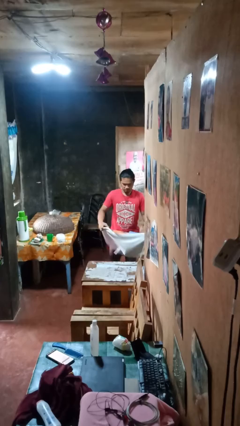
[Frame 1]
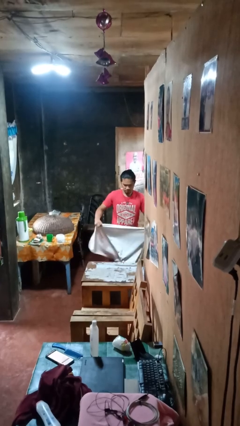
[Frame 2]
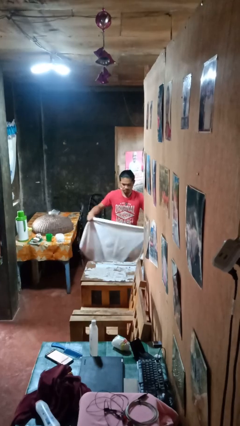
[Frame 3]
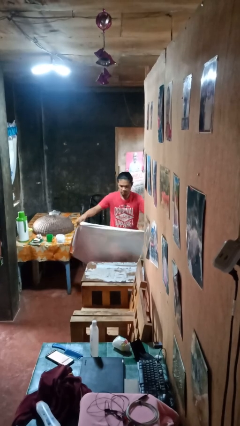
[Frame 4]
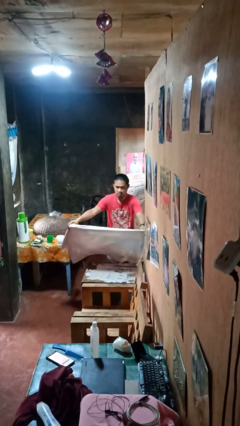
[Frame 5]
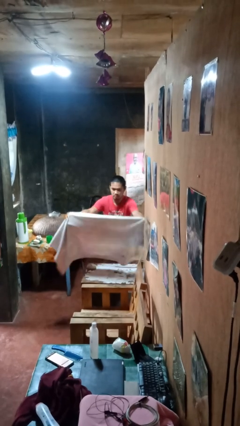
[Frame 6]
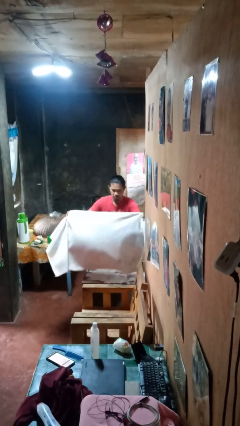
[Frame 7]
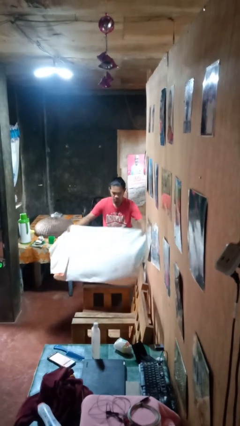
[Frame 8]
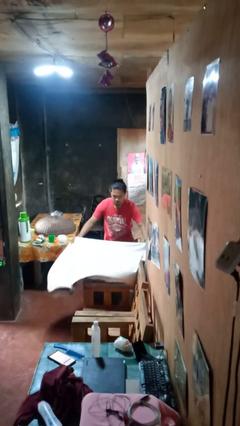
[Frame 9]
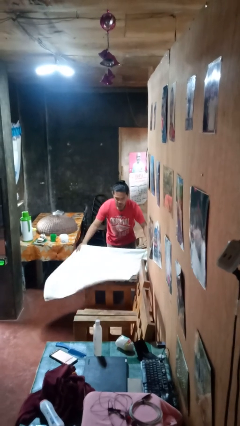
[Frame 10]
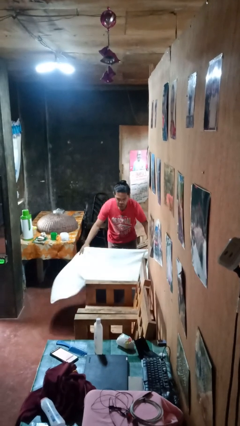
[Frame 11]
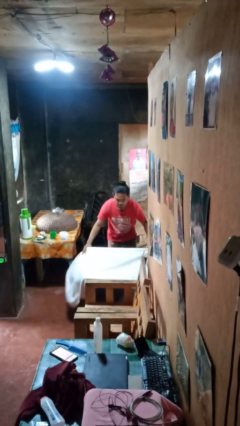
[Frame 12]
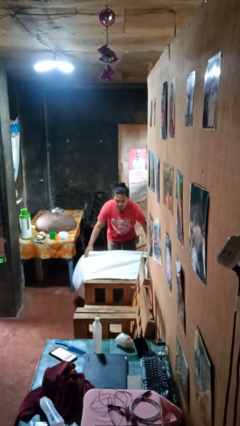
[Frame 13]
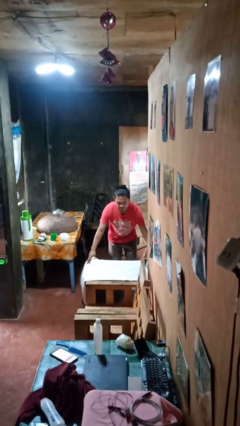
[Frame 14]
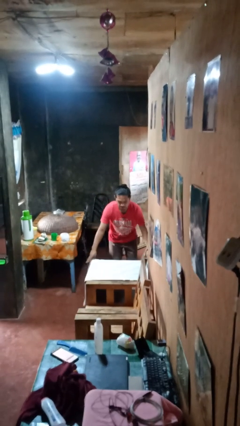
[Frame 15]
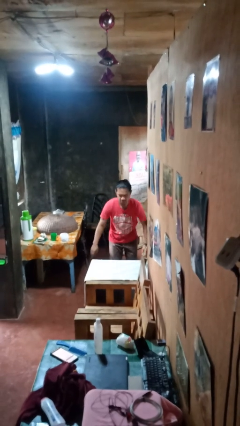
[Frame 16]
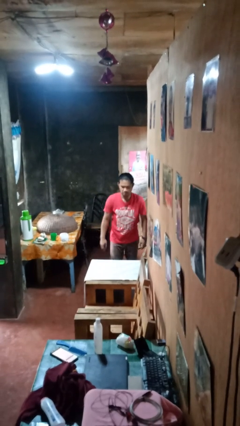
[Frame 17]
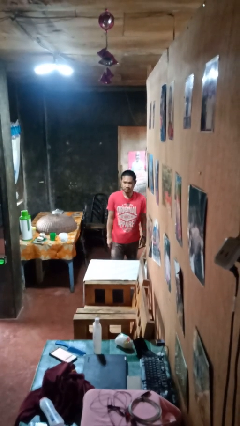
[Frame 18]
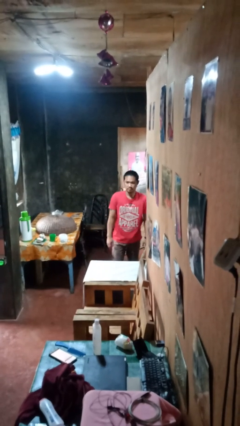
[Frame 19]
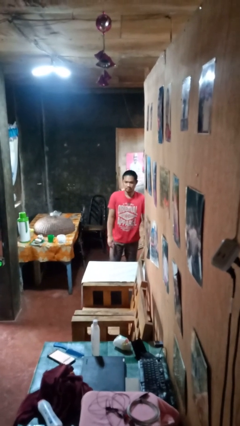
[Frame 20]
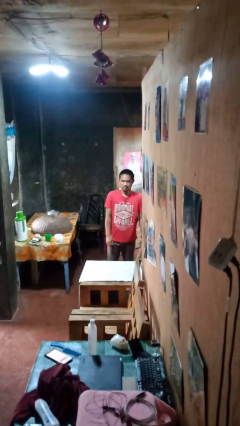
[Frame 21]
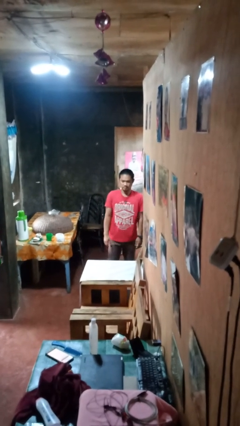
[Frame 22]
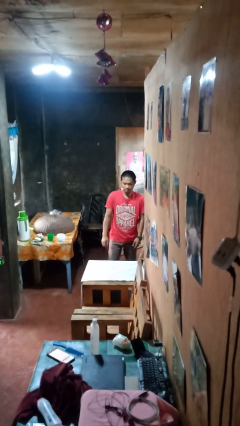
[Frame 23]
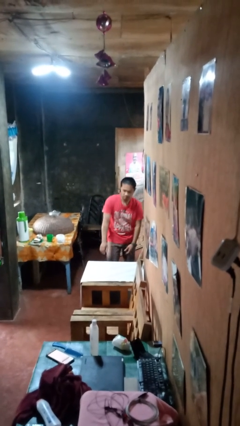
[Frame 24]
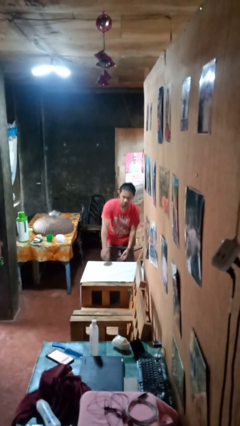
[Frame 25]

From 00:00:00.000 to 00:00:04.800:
person spreads tablecloth

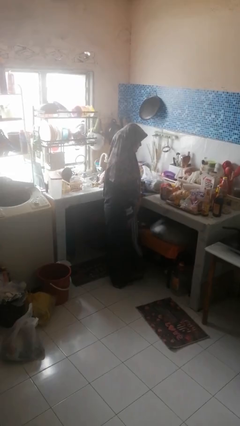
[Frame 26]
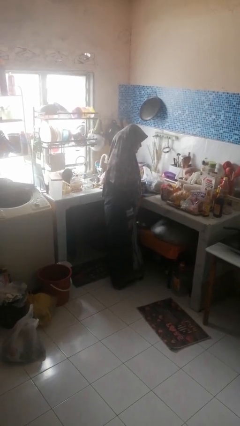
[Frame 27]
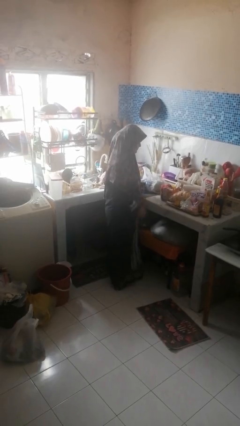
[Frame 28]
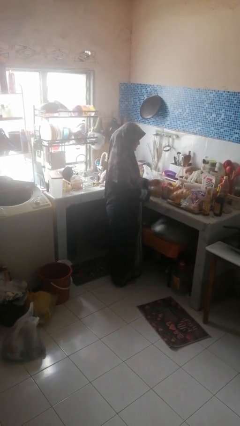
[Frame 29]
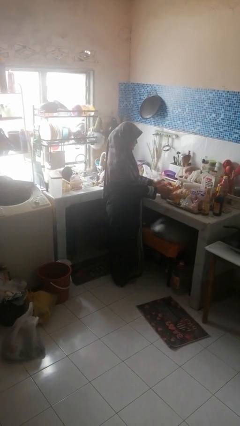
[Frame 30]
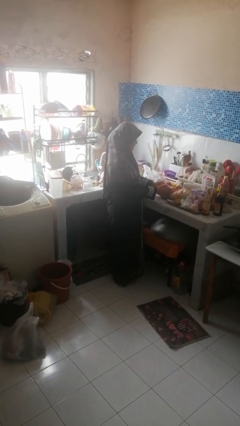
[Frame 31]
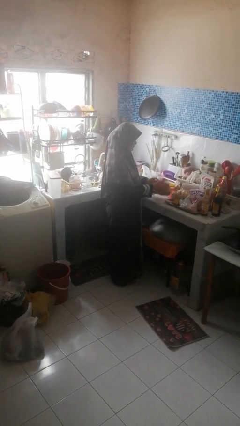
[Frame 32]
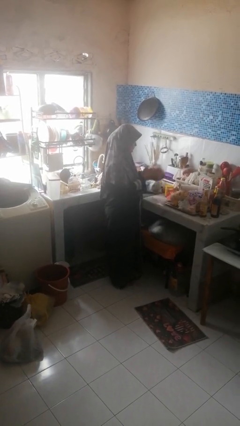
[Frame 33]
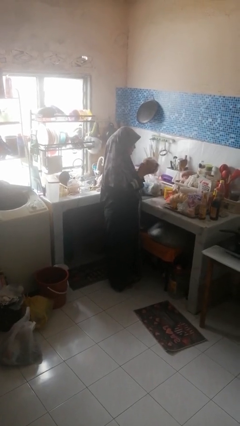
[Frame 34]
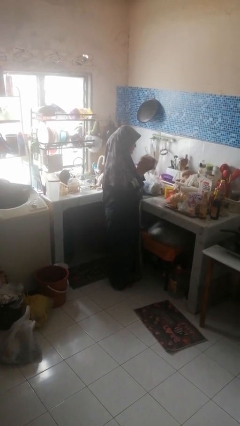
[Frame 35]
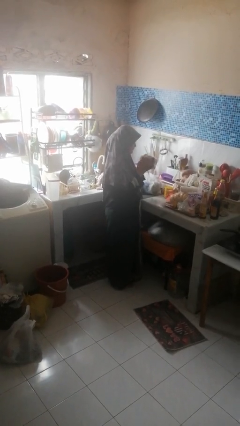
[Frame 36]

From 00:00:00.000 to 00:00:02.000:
person picks up object from countertop

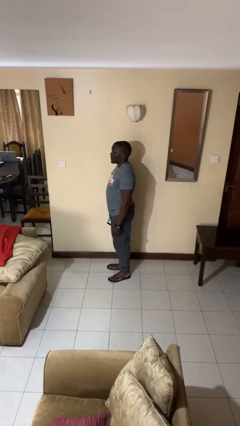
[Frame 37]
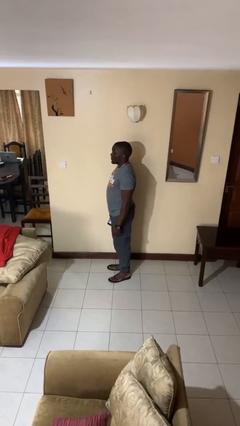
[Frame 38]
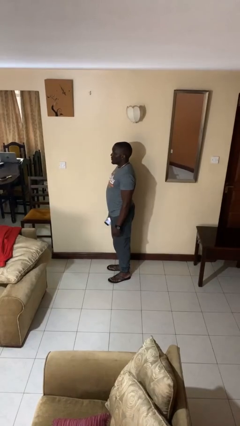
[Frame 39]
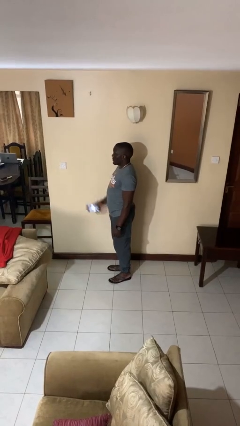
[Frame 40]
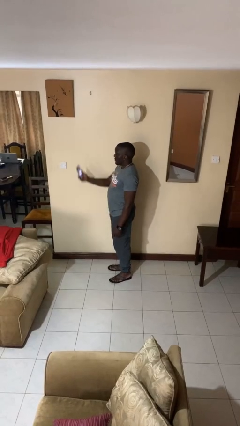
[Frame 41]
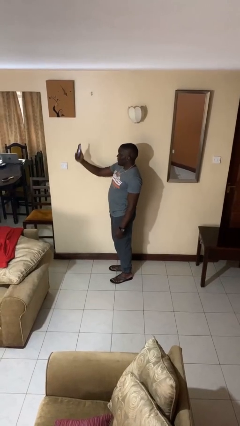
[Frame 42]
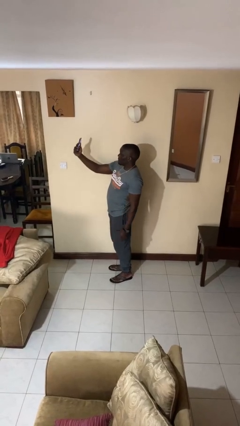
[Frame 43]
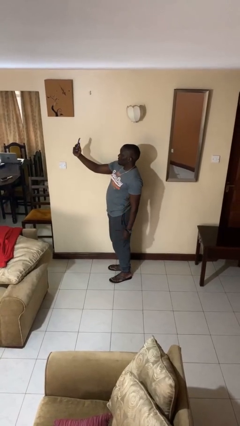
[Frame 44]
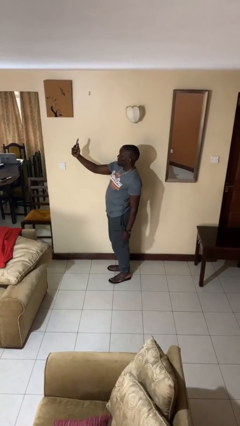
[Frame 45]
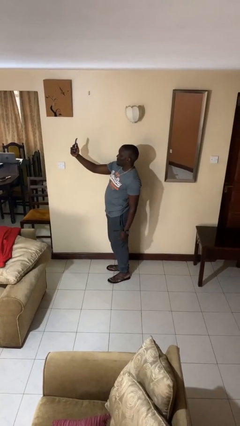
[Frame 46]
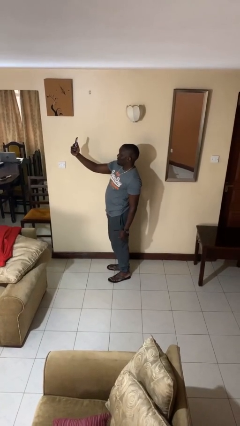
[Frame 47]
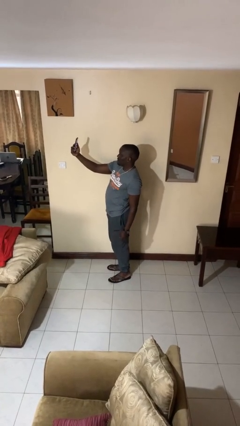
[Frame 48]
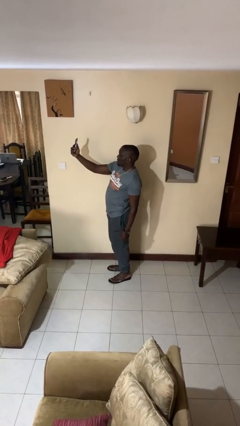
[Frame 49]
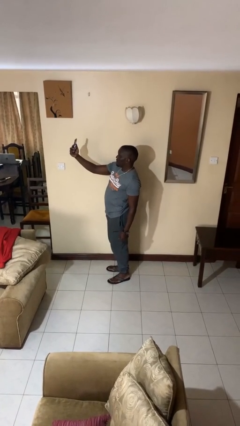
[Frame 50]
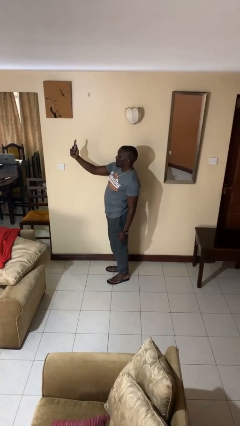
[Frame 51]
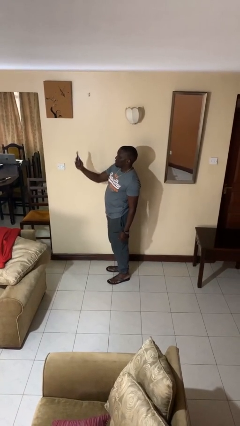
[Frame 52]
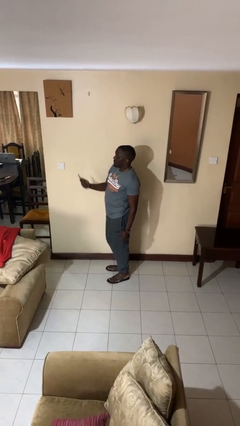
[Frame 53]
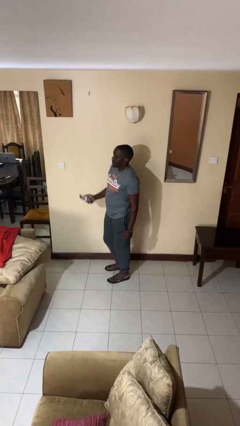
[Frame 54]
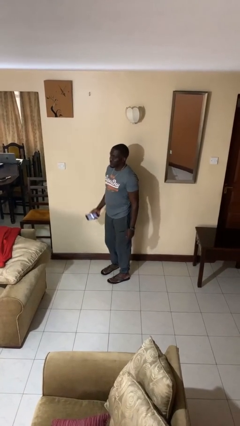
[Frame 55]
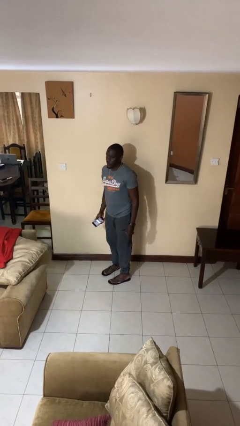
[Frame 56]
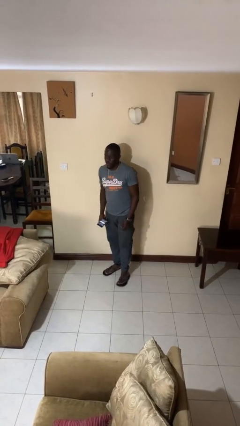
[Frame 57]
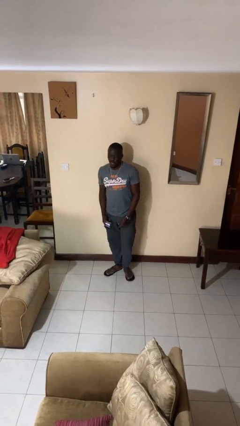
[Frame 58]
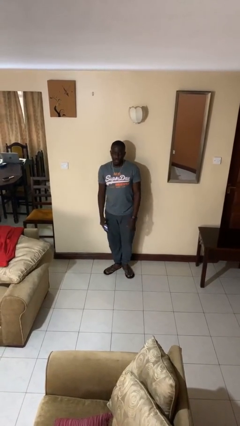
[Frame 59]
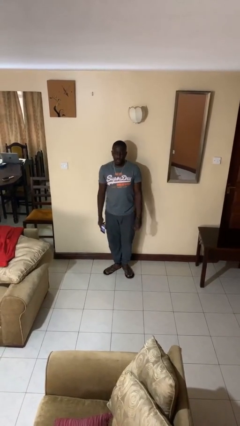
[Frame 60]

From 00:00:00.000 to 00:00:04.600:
person takes selfie

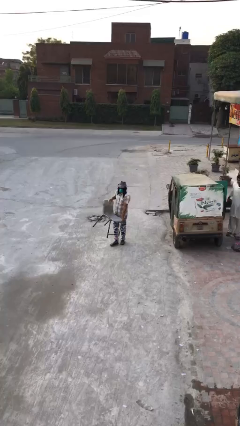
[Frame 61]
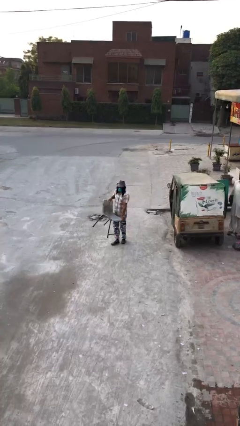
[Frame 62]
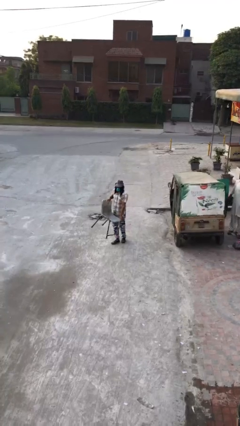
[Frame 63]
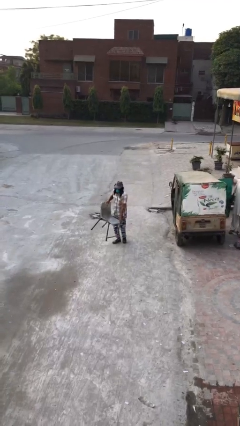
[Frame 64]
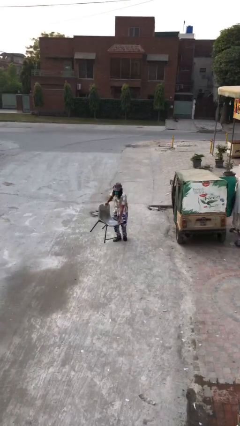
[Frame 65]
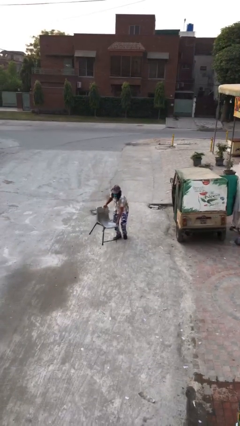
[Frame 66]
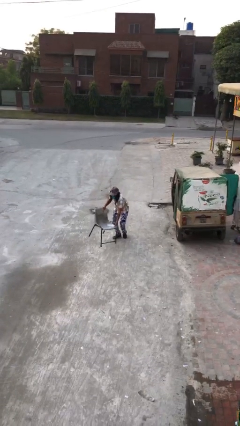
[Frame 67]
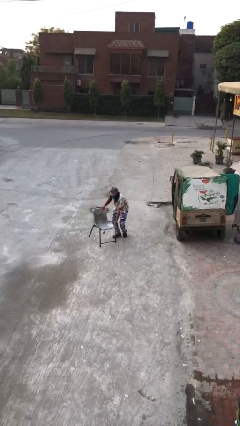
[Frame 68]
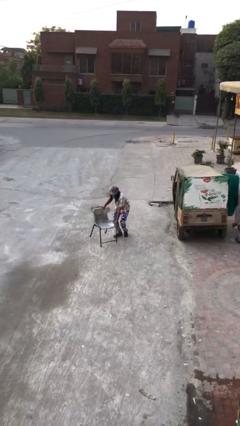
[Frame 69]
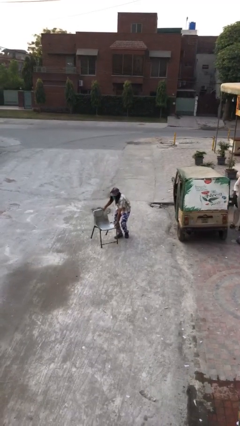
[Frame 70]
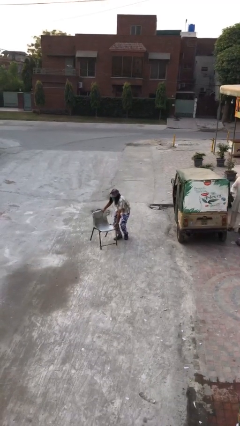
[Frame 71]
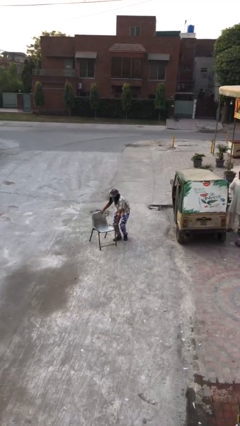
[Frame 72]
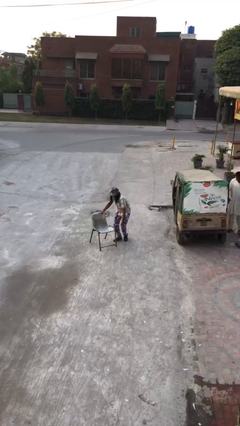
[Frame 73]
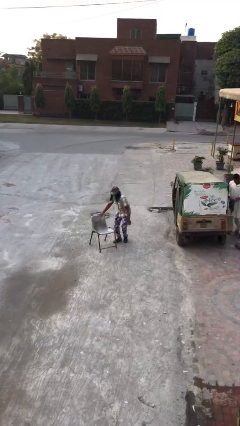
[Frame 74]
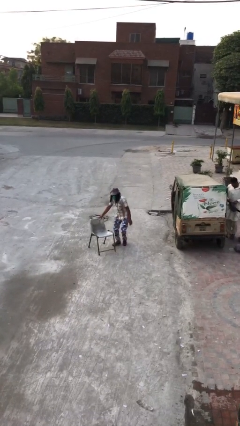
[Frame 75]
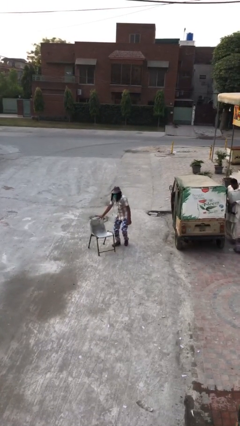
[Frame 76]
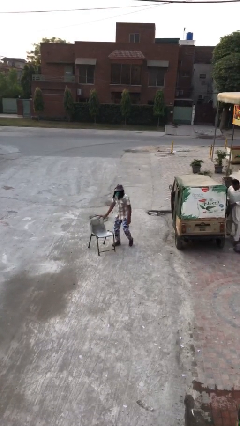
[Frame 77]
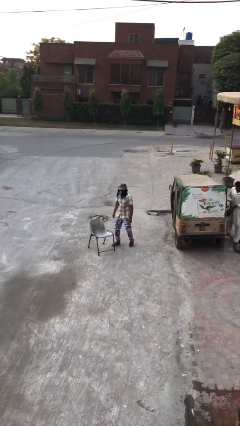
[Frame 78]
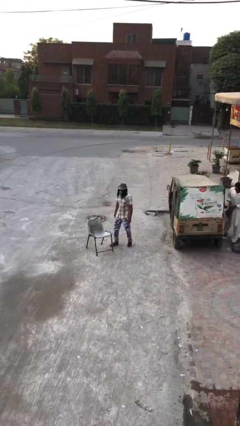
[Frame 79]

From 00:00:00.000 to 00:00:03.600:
person puts down object on floor

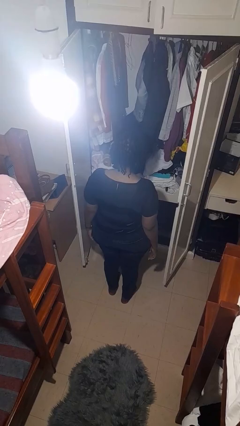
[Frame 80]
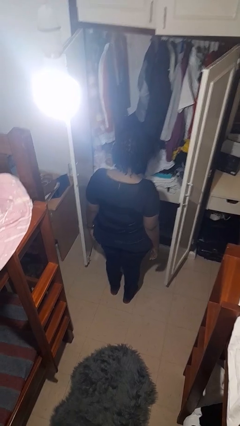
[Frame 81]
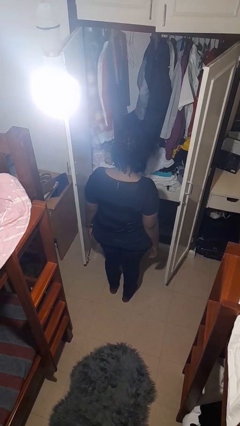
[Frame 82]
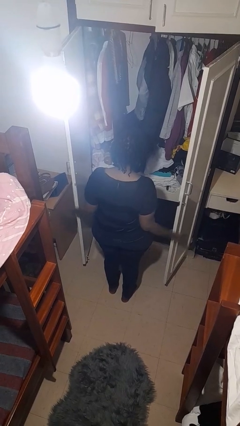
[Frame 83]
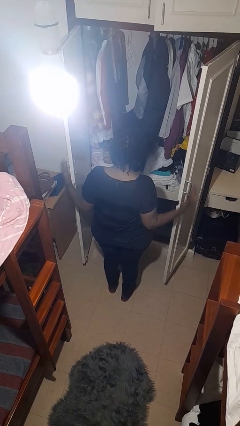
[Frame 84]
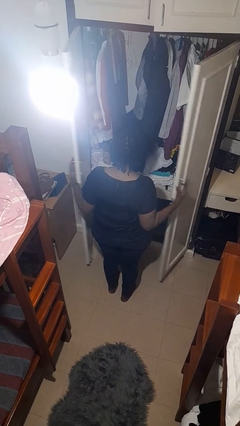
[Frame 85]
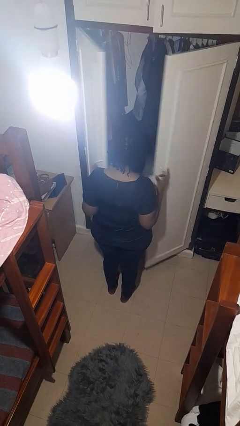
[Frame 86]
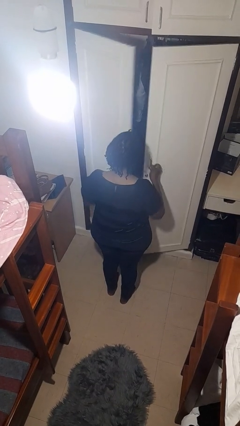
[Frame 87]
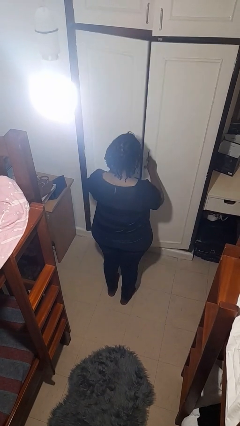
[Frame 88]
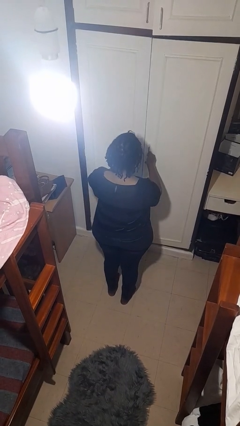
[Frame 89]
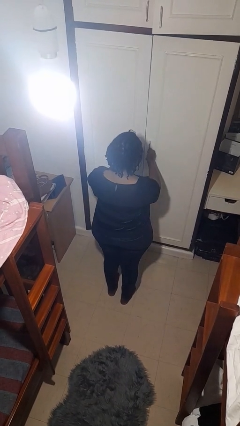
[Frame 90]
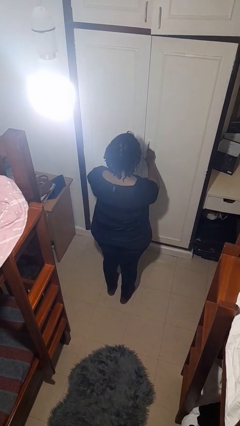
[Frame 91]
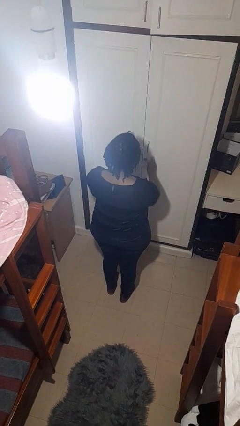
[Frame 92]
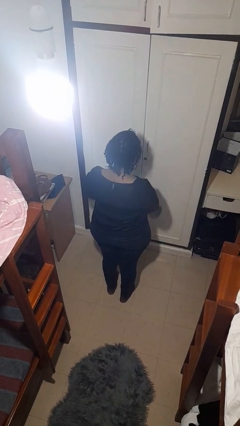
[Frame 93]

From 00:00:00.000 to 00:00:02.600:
person closes closet door
